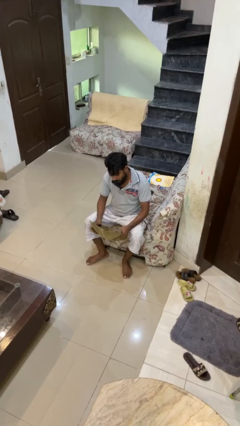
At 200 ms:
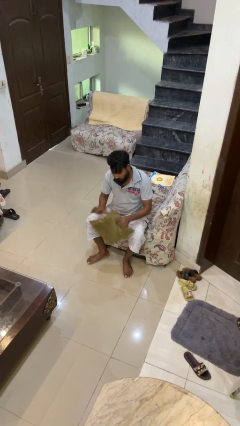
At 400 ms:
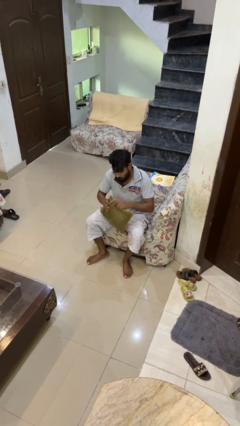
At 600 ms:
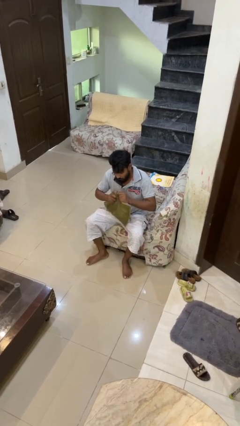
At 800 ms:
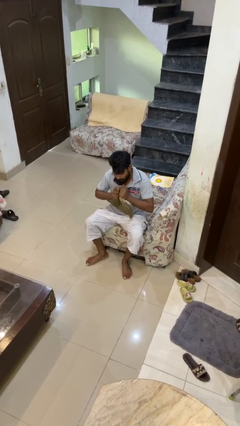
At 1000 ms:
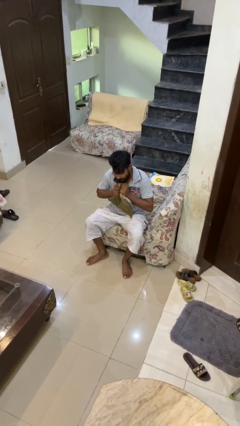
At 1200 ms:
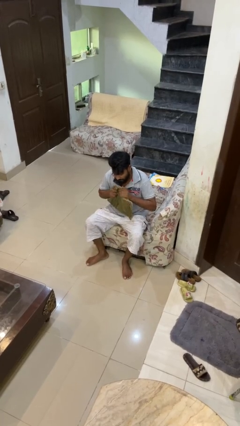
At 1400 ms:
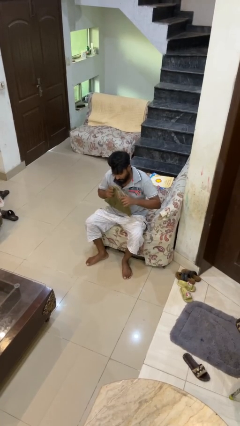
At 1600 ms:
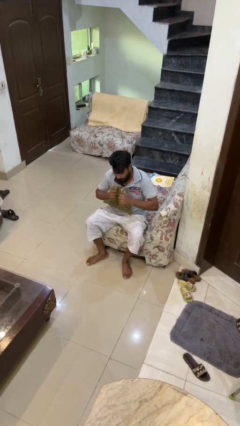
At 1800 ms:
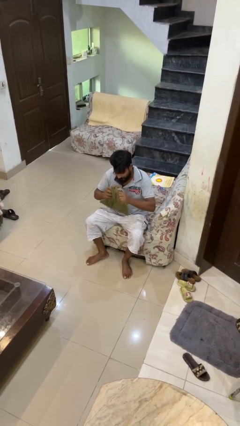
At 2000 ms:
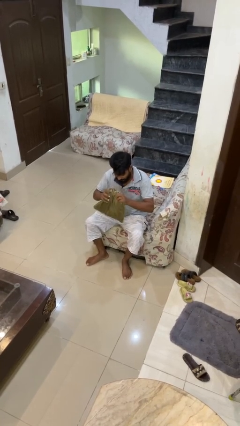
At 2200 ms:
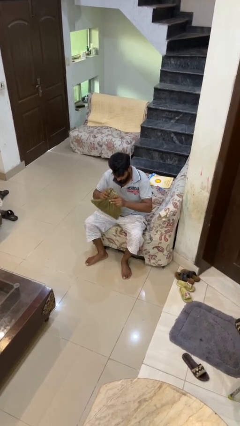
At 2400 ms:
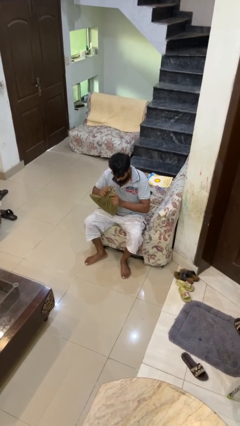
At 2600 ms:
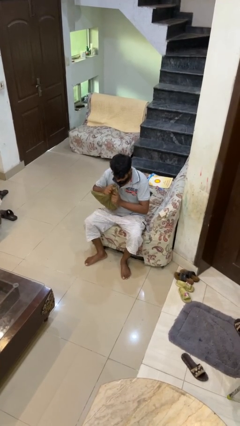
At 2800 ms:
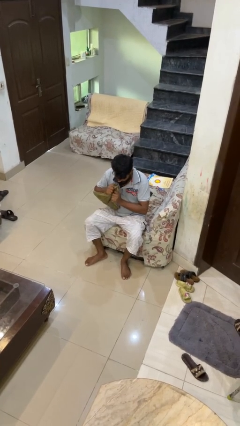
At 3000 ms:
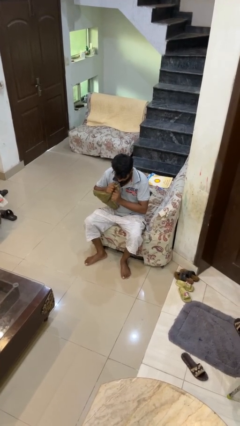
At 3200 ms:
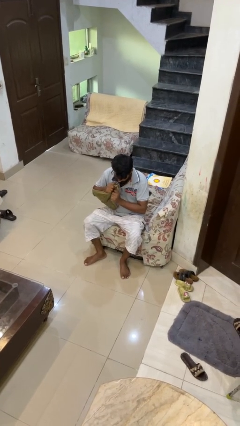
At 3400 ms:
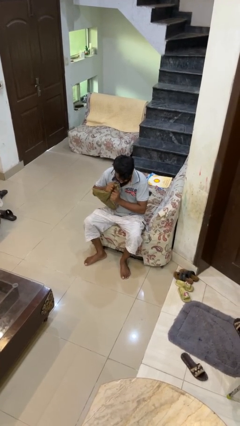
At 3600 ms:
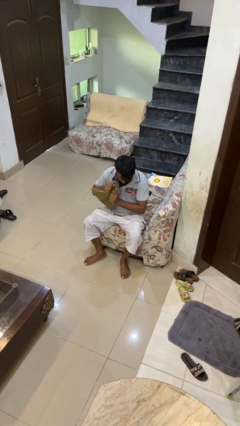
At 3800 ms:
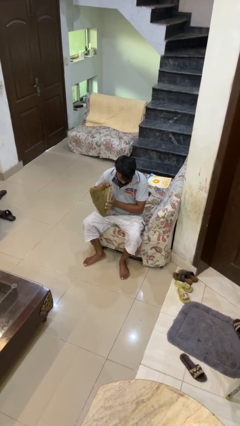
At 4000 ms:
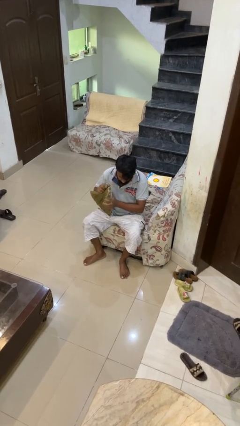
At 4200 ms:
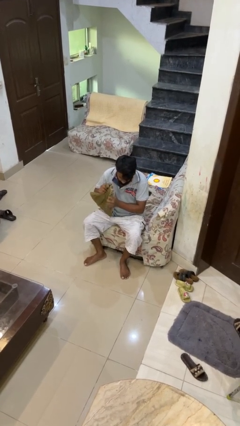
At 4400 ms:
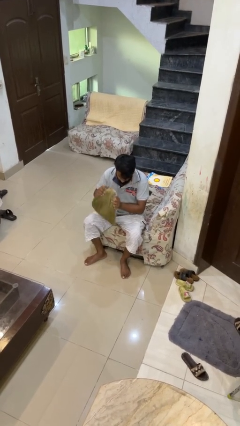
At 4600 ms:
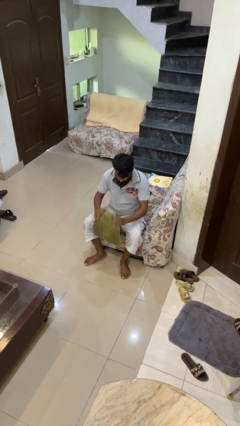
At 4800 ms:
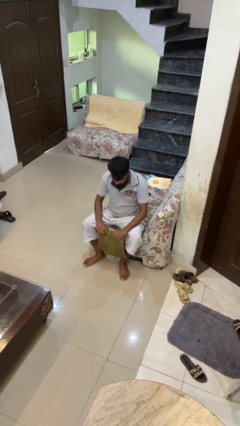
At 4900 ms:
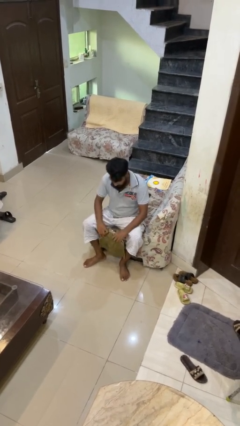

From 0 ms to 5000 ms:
person squeezes object

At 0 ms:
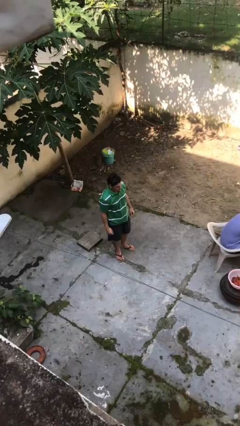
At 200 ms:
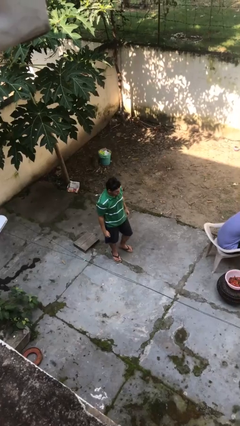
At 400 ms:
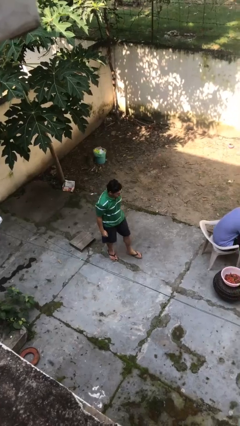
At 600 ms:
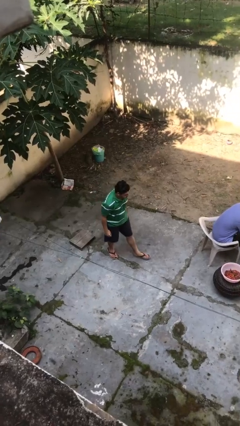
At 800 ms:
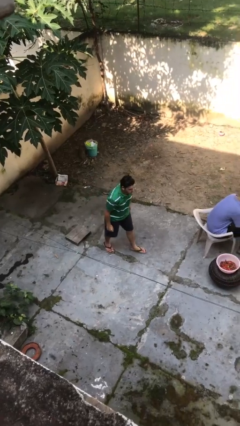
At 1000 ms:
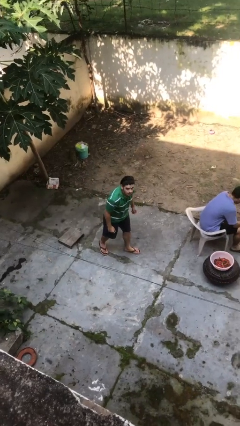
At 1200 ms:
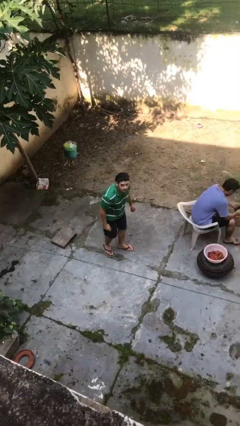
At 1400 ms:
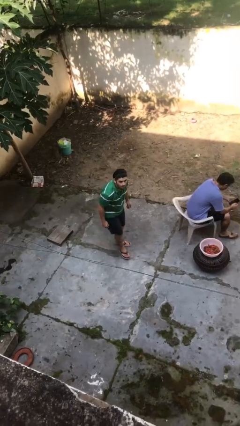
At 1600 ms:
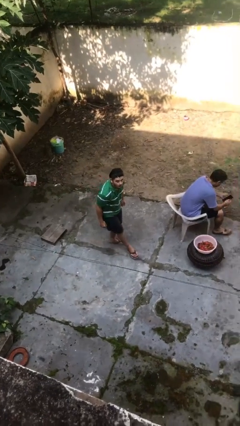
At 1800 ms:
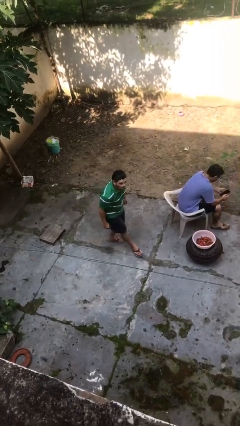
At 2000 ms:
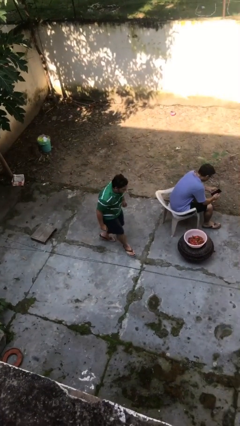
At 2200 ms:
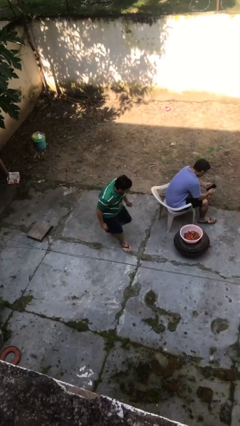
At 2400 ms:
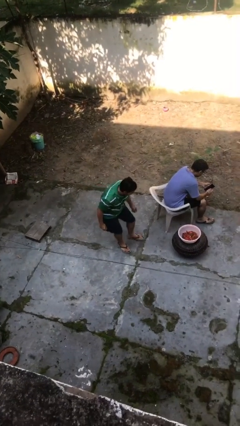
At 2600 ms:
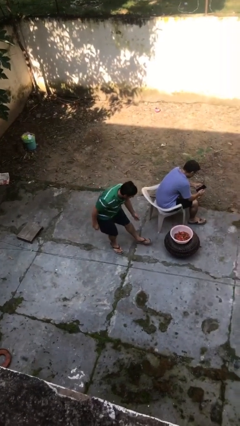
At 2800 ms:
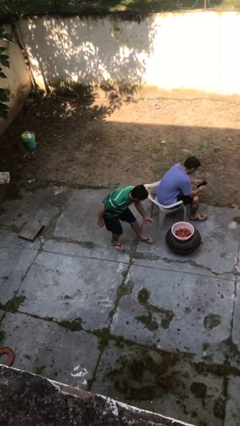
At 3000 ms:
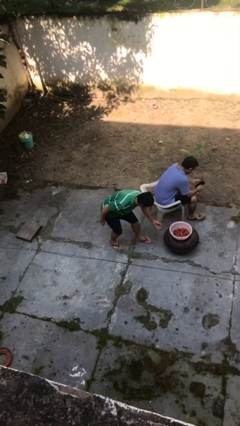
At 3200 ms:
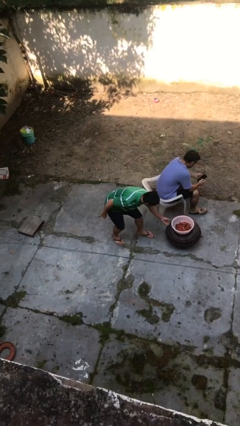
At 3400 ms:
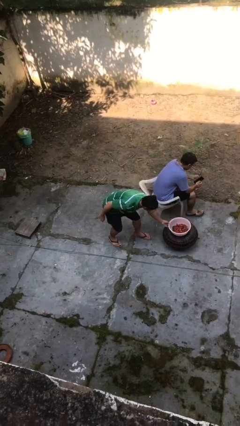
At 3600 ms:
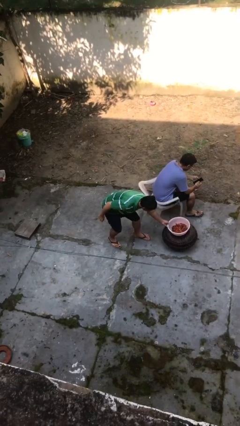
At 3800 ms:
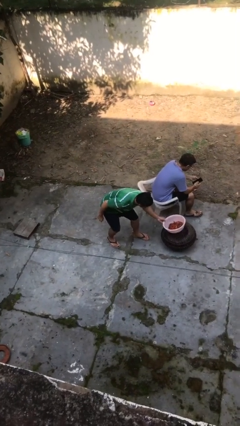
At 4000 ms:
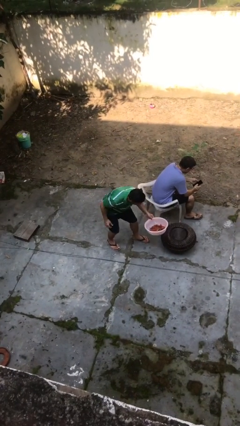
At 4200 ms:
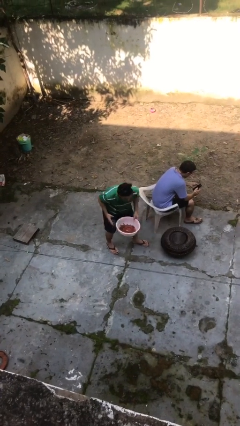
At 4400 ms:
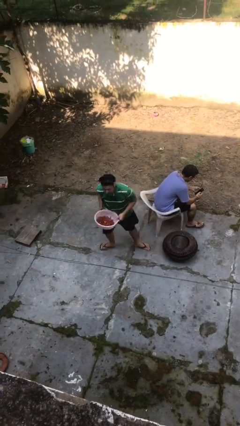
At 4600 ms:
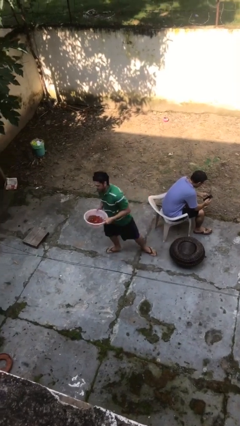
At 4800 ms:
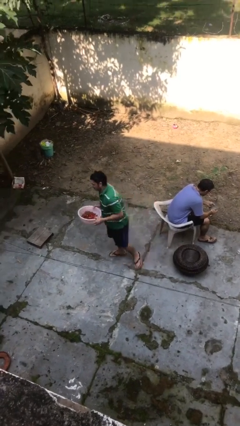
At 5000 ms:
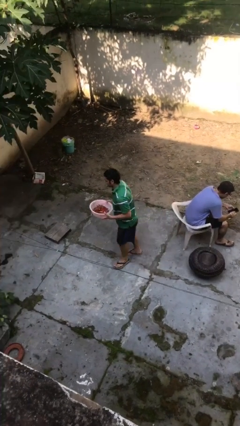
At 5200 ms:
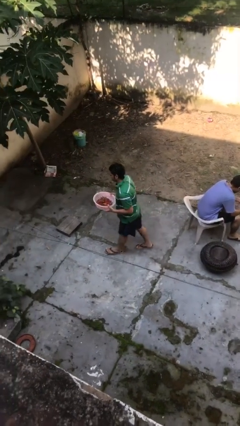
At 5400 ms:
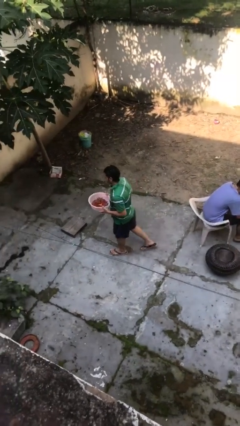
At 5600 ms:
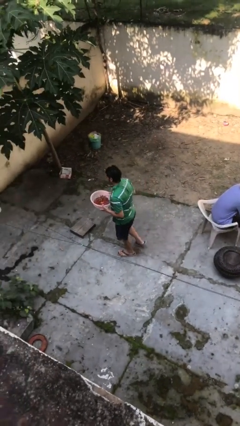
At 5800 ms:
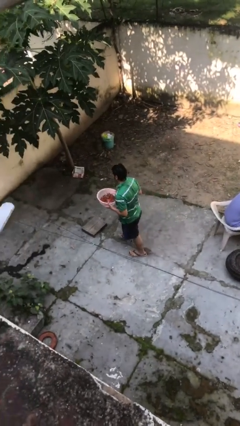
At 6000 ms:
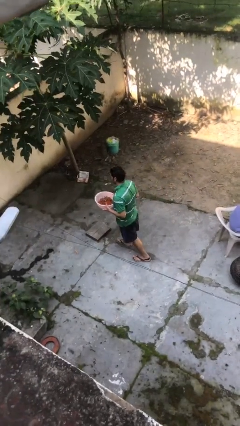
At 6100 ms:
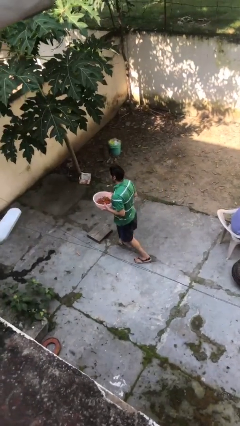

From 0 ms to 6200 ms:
person steals object from person

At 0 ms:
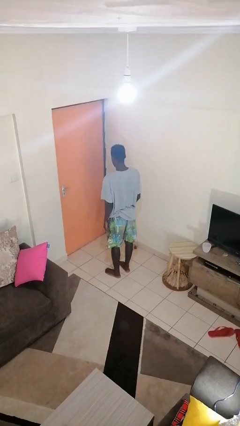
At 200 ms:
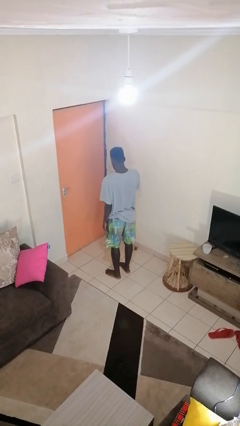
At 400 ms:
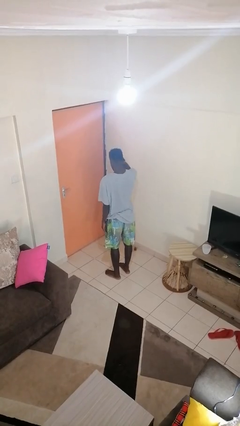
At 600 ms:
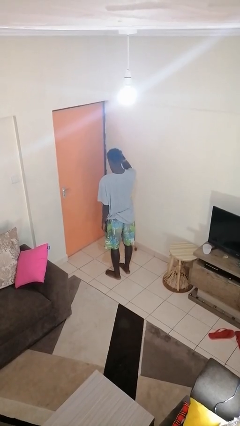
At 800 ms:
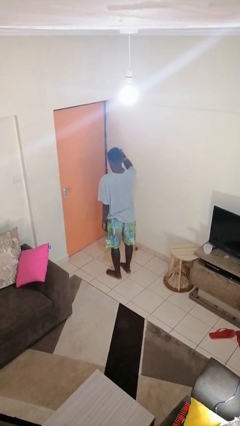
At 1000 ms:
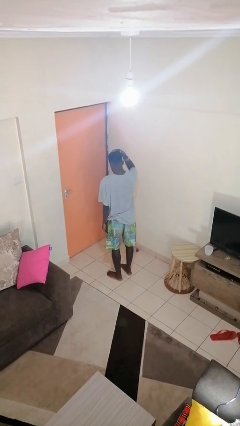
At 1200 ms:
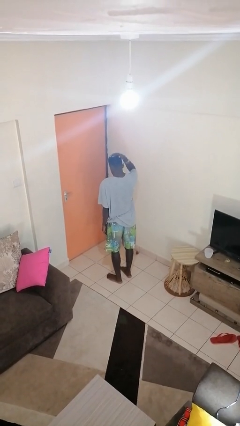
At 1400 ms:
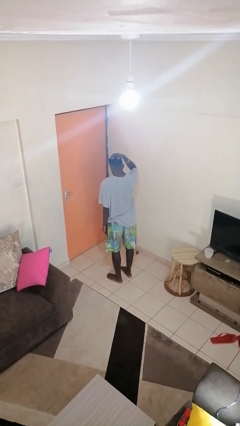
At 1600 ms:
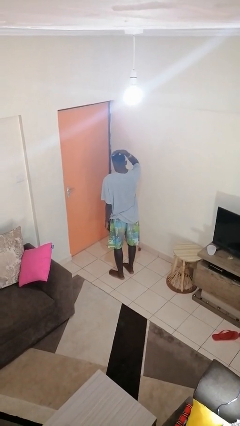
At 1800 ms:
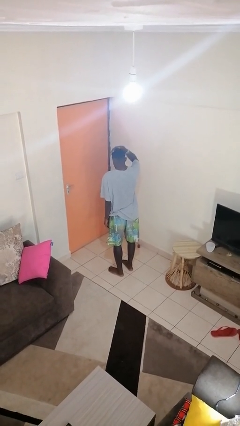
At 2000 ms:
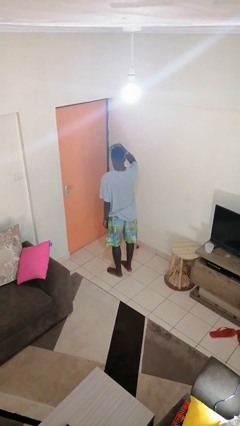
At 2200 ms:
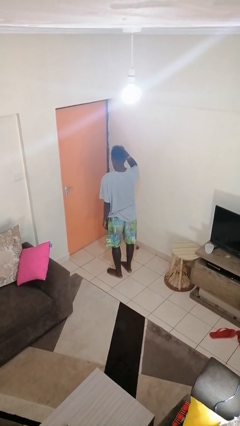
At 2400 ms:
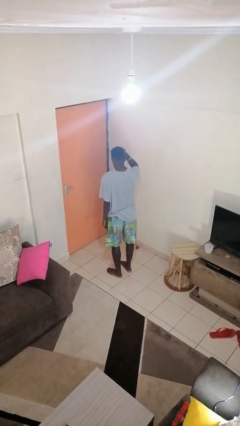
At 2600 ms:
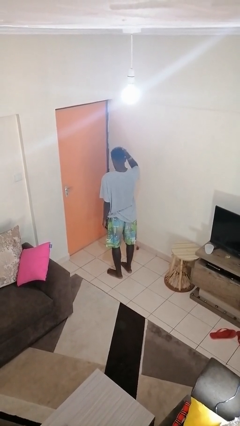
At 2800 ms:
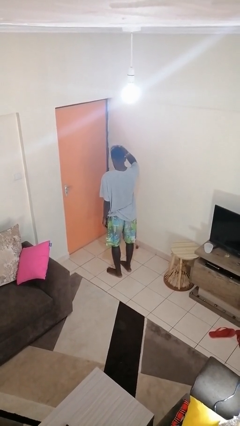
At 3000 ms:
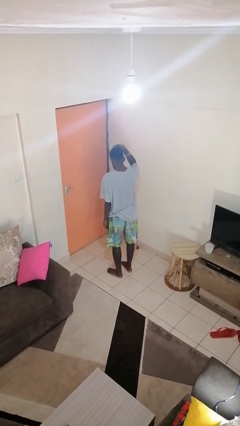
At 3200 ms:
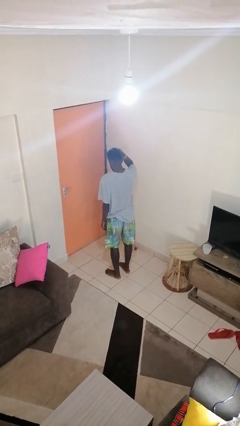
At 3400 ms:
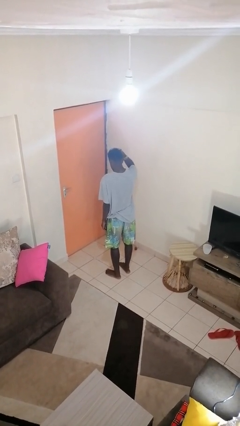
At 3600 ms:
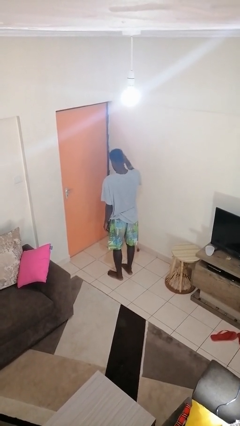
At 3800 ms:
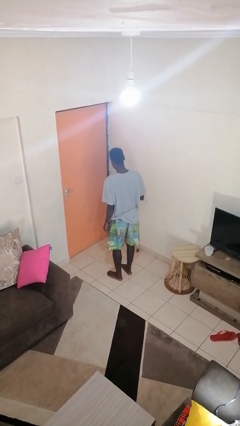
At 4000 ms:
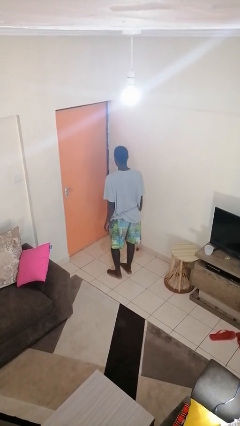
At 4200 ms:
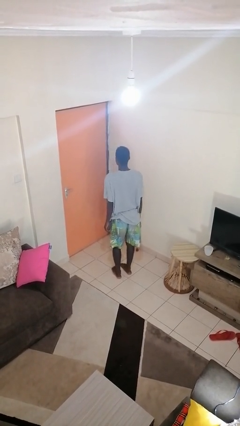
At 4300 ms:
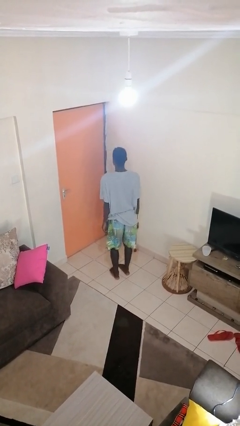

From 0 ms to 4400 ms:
person pats head

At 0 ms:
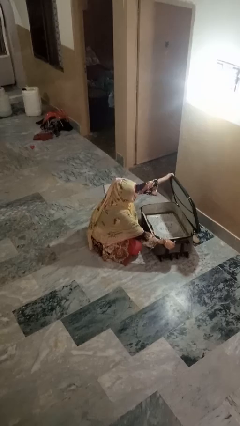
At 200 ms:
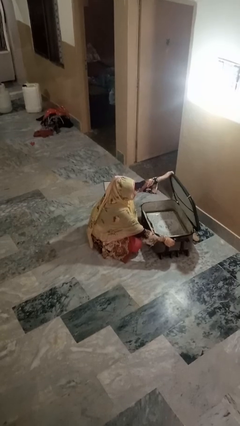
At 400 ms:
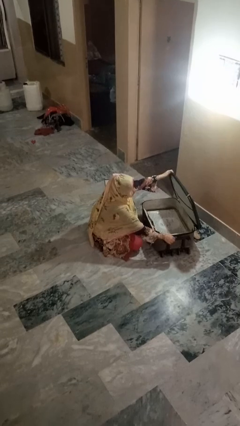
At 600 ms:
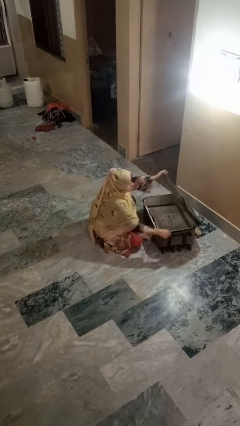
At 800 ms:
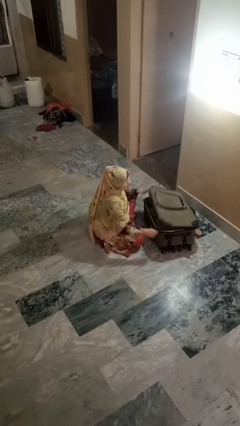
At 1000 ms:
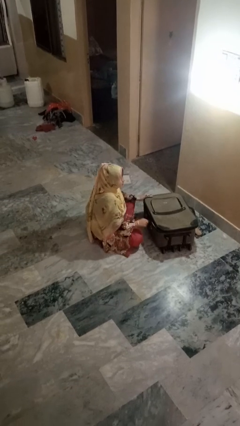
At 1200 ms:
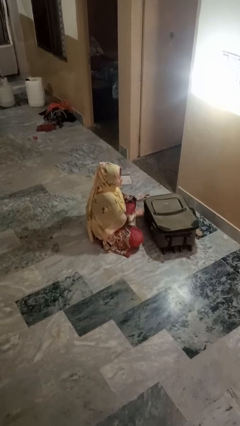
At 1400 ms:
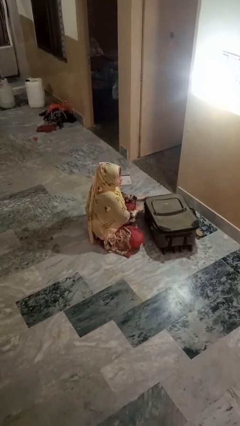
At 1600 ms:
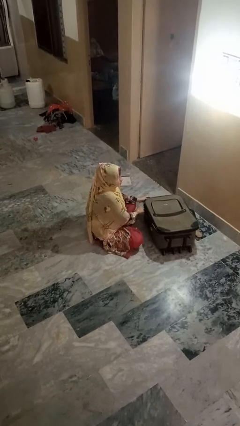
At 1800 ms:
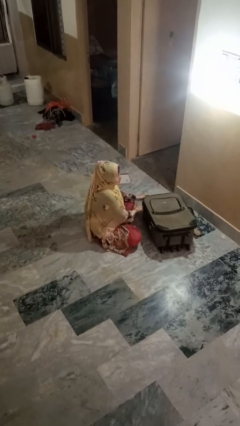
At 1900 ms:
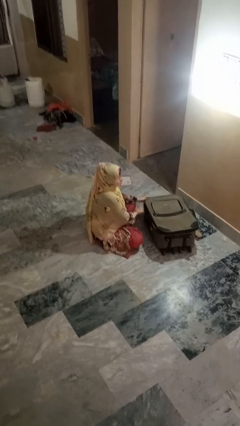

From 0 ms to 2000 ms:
person closes suitcase
